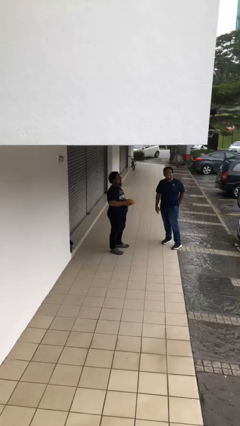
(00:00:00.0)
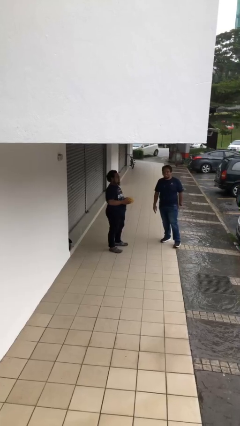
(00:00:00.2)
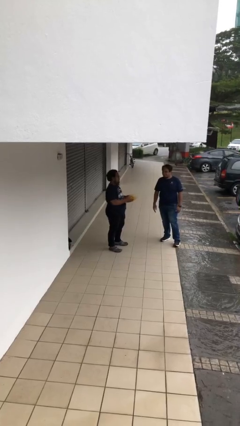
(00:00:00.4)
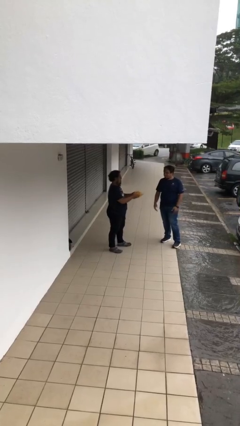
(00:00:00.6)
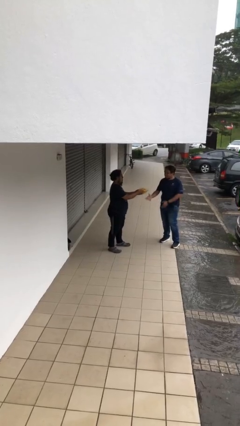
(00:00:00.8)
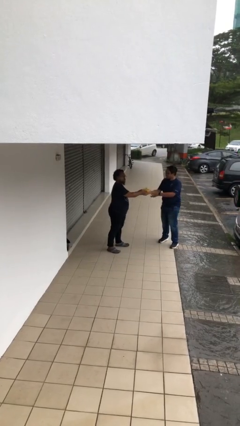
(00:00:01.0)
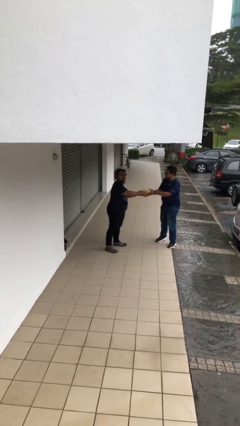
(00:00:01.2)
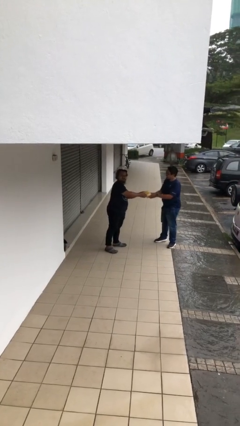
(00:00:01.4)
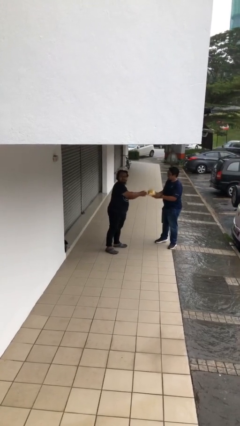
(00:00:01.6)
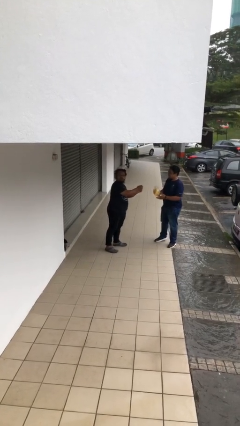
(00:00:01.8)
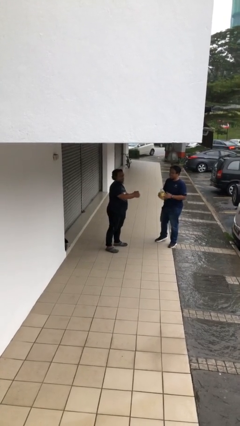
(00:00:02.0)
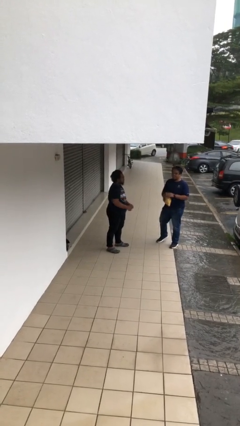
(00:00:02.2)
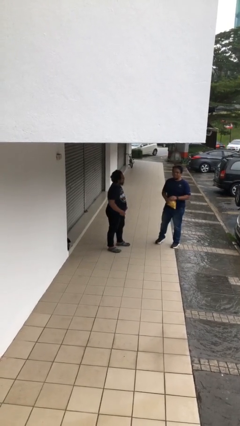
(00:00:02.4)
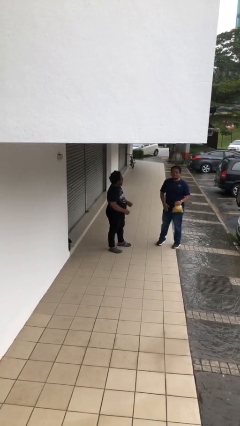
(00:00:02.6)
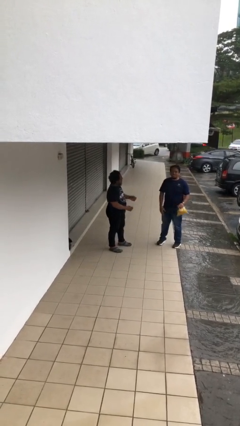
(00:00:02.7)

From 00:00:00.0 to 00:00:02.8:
person transfers object to person

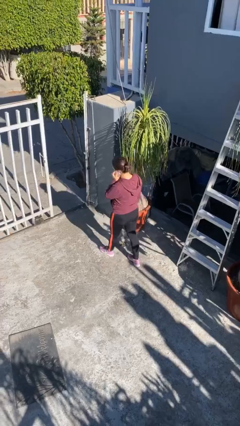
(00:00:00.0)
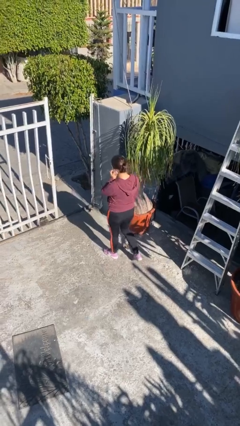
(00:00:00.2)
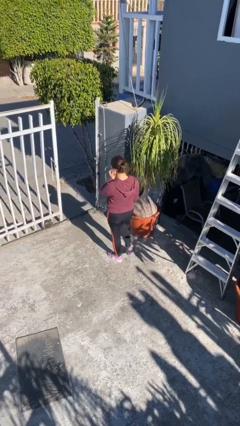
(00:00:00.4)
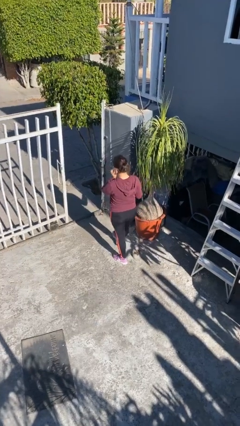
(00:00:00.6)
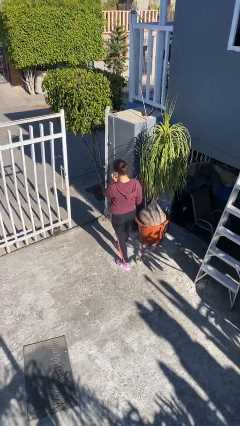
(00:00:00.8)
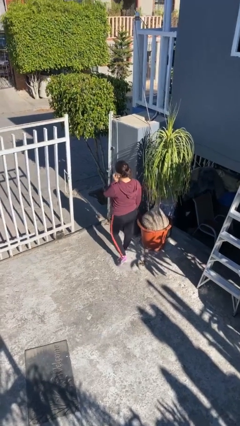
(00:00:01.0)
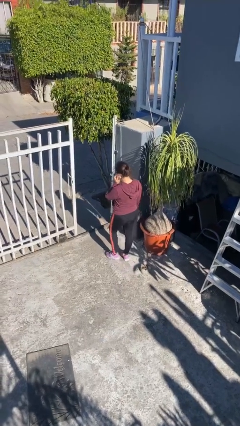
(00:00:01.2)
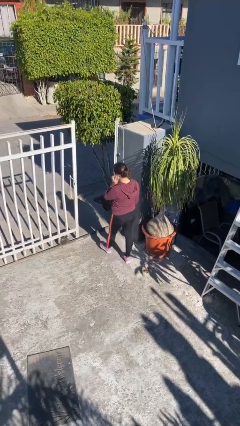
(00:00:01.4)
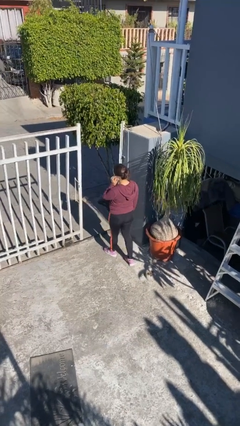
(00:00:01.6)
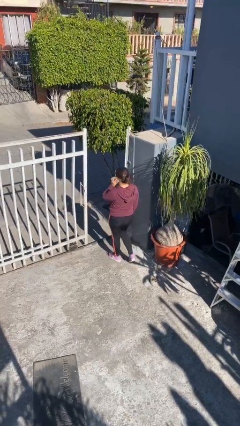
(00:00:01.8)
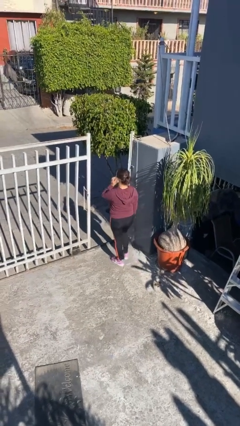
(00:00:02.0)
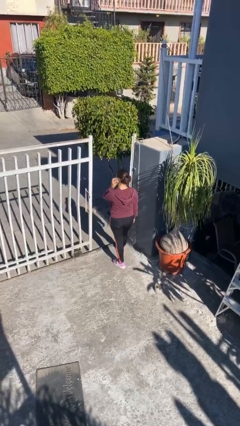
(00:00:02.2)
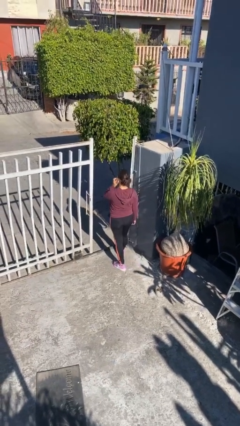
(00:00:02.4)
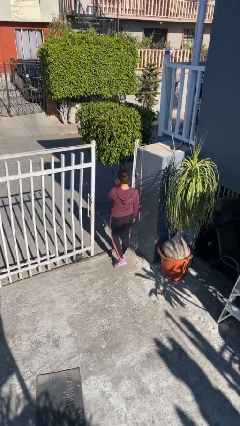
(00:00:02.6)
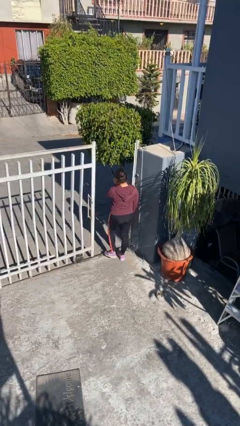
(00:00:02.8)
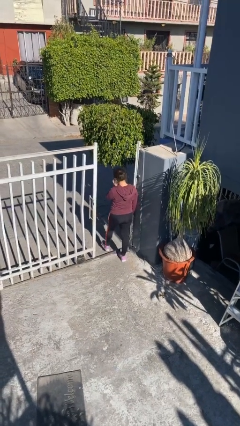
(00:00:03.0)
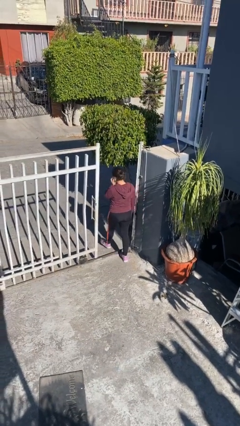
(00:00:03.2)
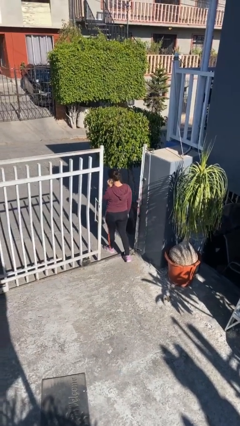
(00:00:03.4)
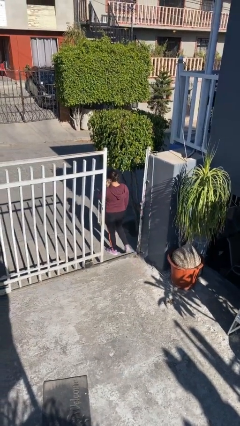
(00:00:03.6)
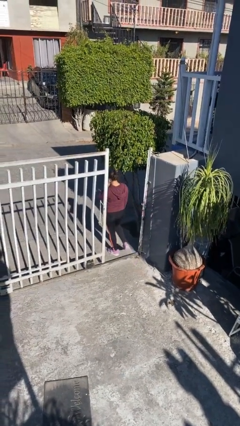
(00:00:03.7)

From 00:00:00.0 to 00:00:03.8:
person exits scene through structure

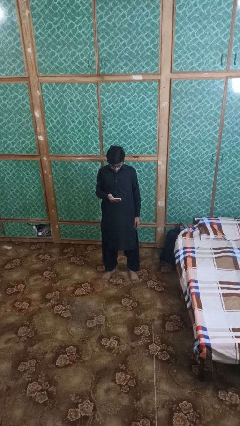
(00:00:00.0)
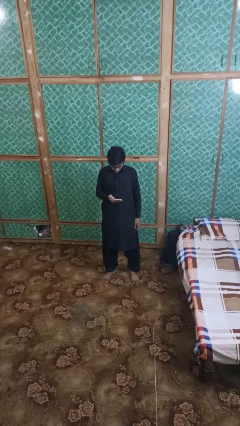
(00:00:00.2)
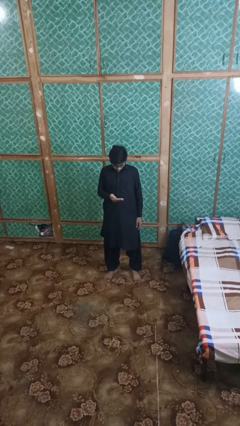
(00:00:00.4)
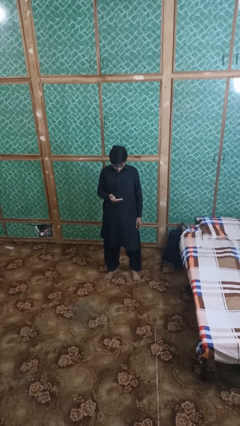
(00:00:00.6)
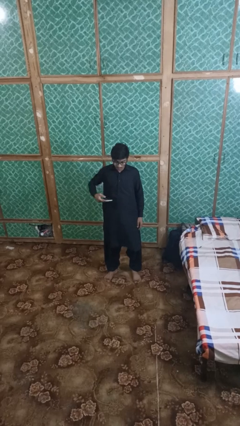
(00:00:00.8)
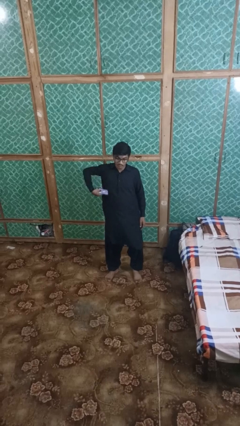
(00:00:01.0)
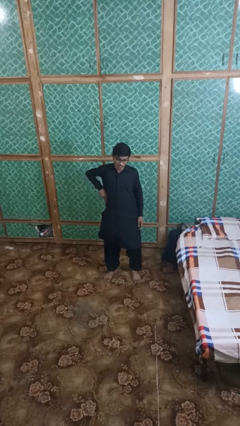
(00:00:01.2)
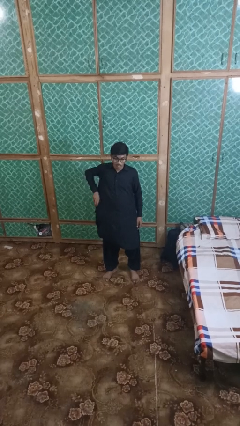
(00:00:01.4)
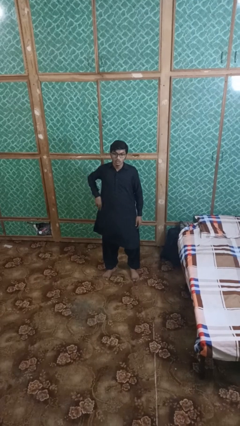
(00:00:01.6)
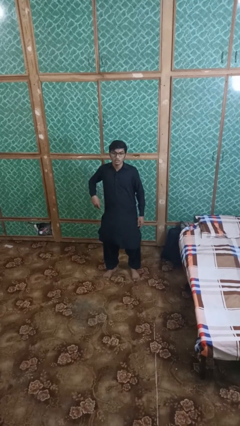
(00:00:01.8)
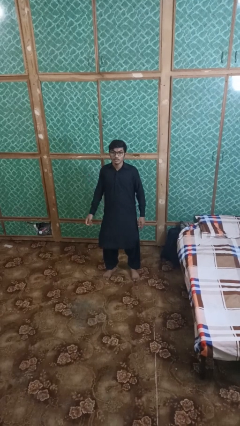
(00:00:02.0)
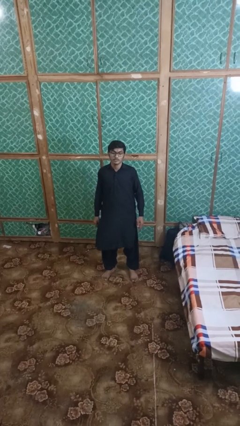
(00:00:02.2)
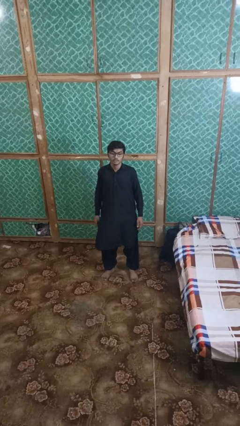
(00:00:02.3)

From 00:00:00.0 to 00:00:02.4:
person puts phone into pocket

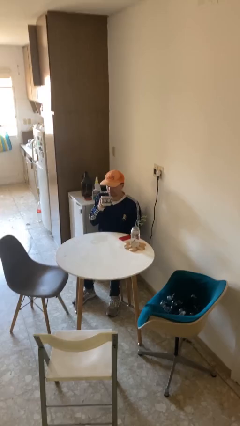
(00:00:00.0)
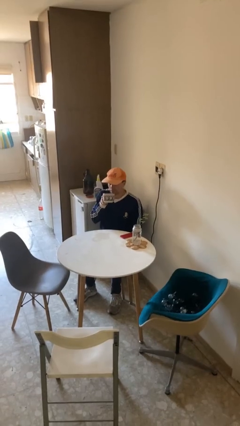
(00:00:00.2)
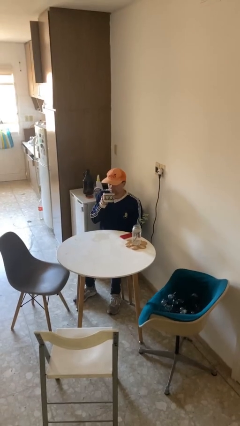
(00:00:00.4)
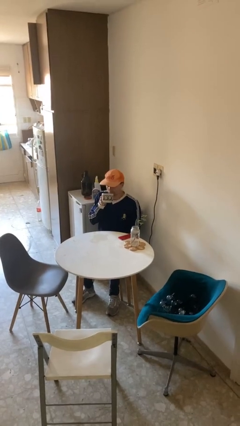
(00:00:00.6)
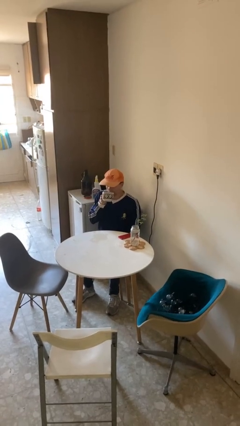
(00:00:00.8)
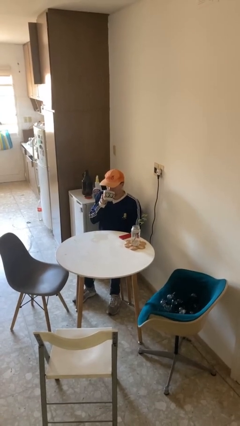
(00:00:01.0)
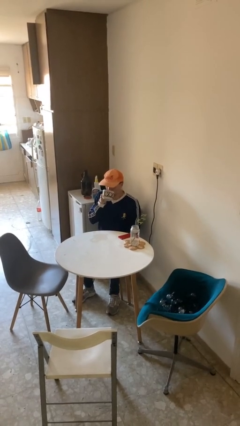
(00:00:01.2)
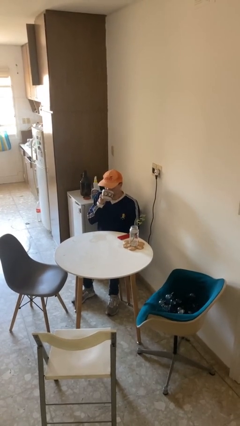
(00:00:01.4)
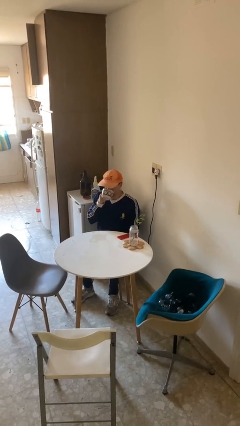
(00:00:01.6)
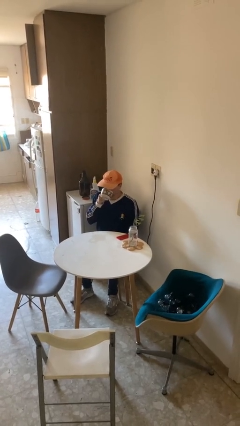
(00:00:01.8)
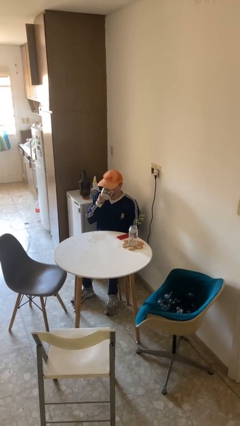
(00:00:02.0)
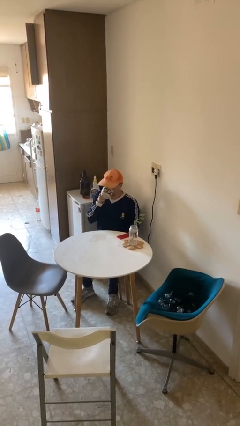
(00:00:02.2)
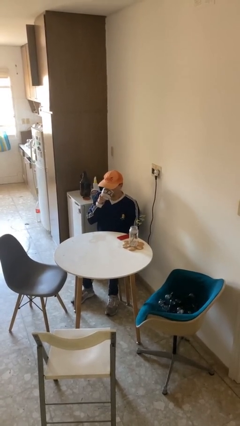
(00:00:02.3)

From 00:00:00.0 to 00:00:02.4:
person drinks from mug

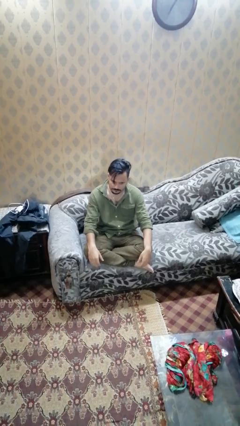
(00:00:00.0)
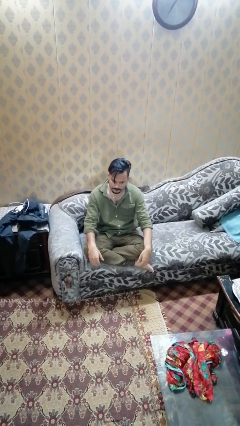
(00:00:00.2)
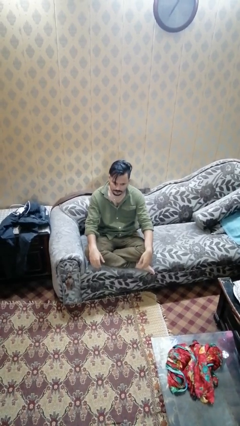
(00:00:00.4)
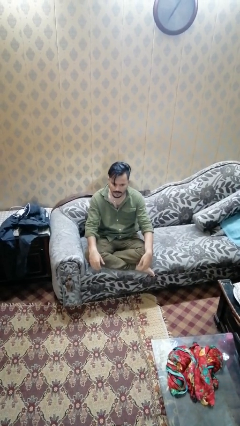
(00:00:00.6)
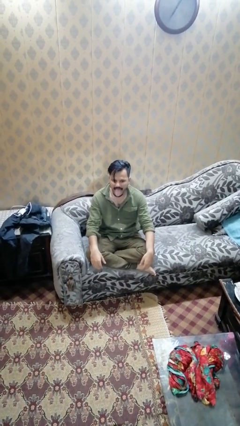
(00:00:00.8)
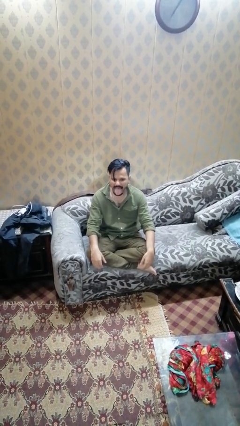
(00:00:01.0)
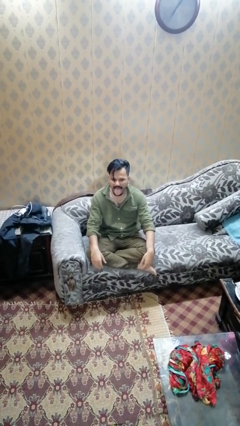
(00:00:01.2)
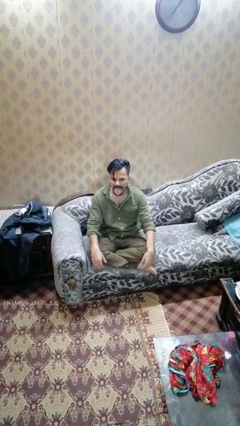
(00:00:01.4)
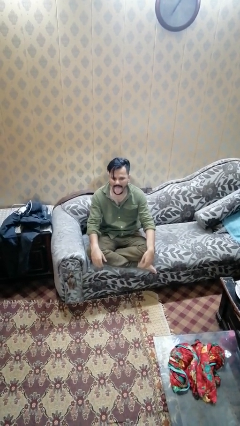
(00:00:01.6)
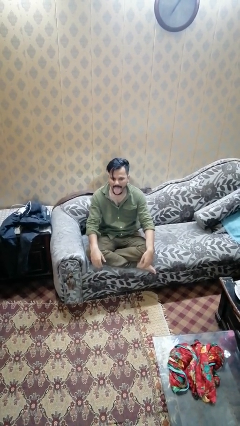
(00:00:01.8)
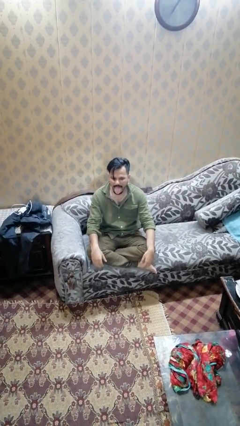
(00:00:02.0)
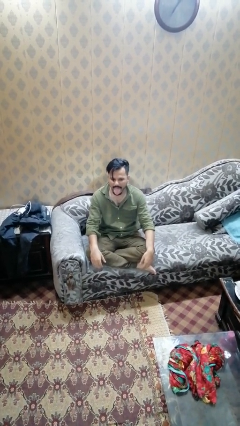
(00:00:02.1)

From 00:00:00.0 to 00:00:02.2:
person sticks out tongue

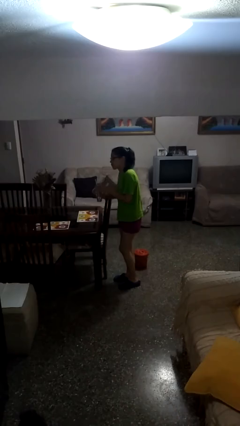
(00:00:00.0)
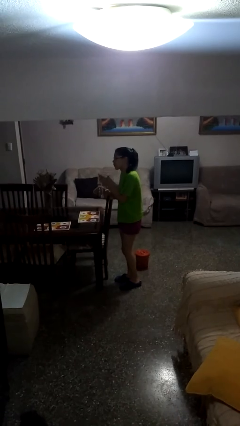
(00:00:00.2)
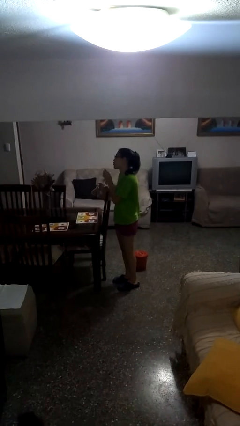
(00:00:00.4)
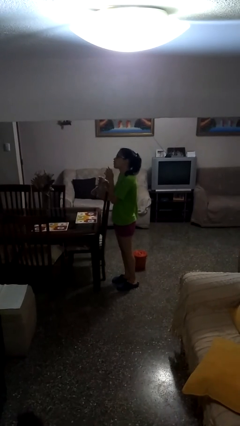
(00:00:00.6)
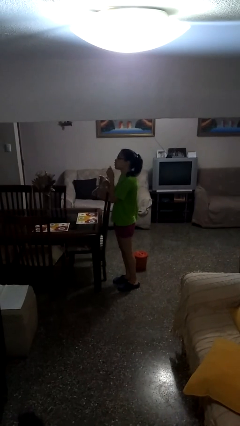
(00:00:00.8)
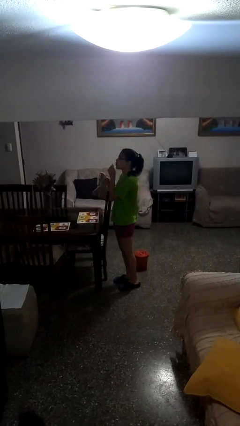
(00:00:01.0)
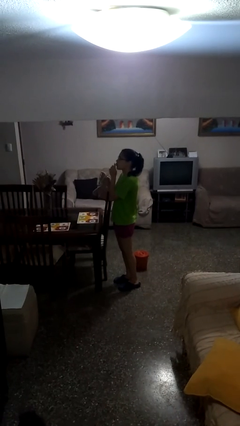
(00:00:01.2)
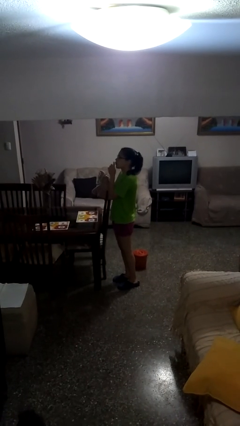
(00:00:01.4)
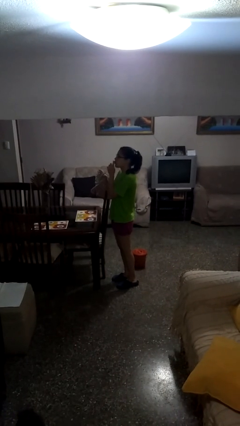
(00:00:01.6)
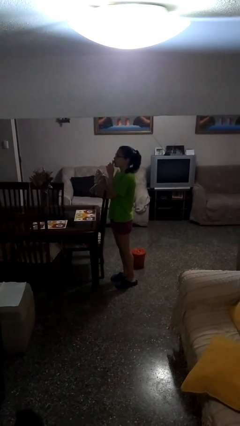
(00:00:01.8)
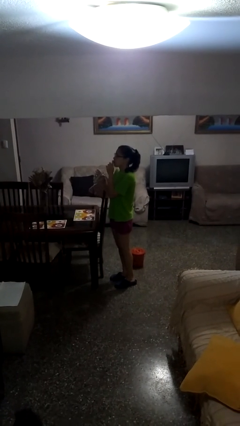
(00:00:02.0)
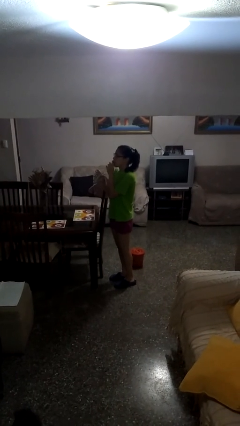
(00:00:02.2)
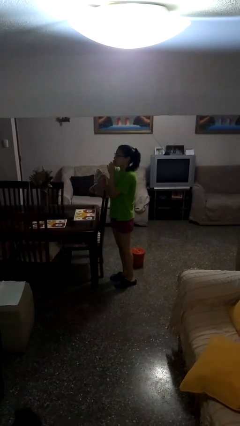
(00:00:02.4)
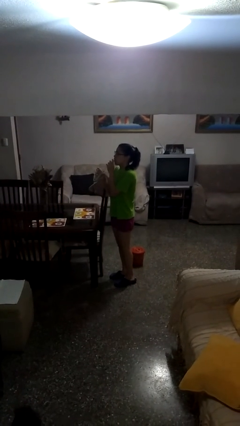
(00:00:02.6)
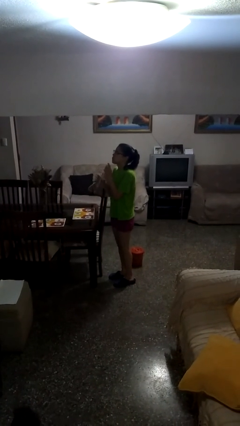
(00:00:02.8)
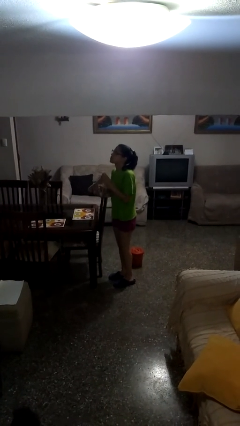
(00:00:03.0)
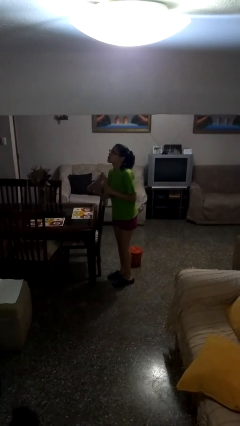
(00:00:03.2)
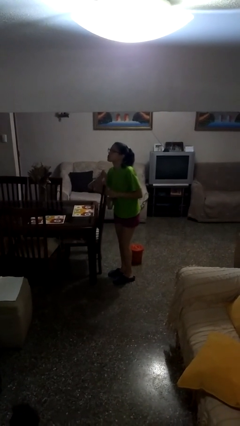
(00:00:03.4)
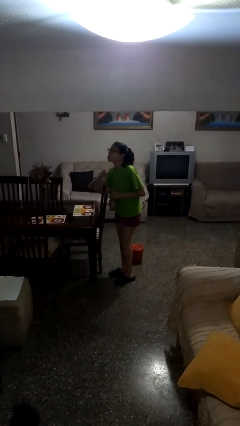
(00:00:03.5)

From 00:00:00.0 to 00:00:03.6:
person drinks from straw
